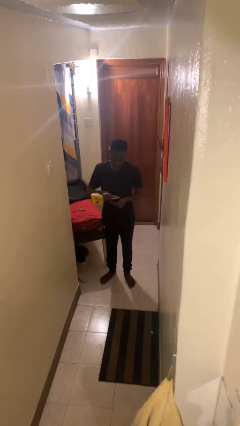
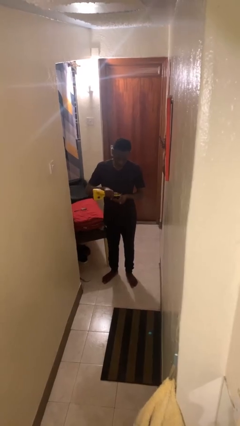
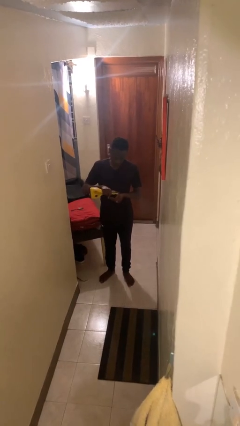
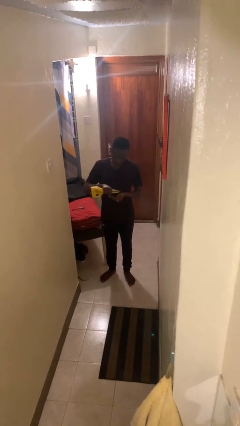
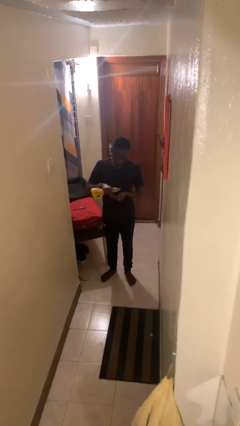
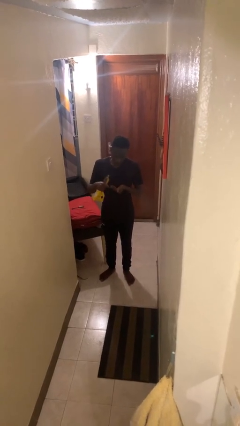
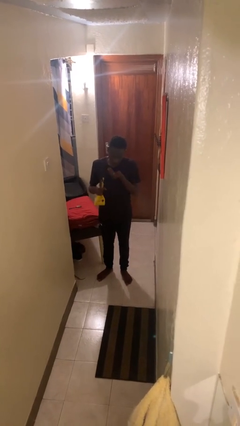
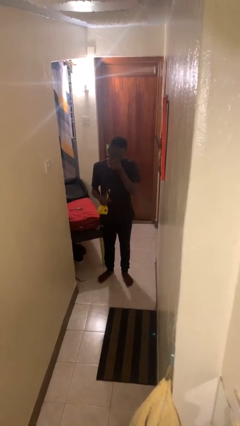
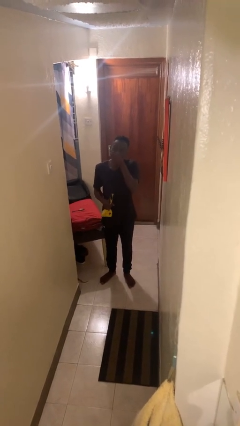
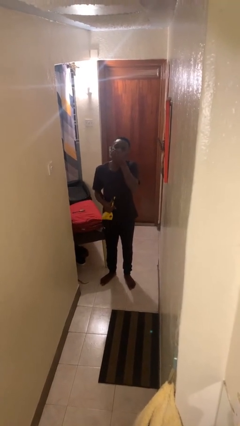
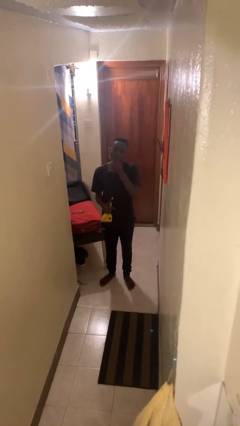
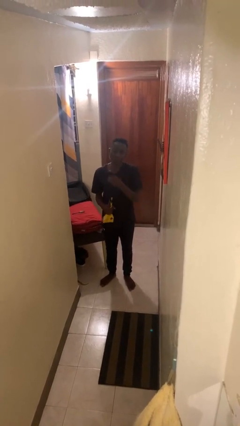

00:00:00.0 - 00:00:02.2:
person eats snack from bag

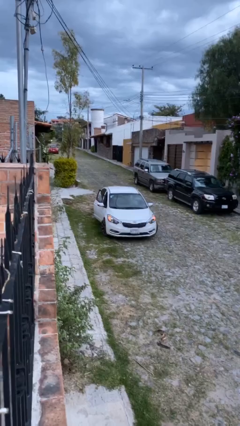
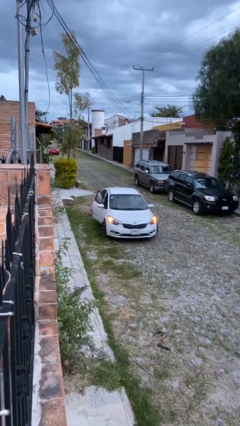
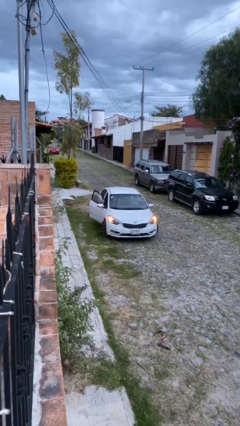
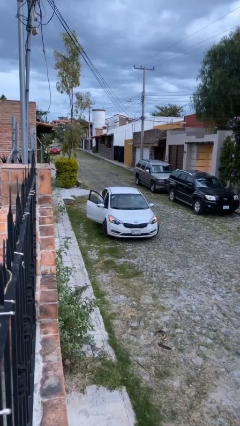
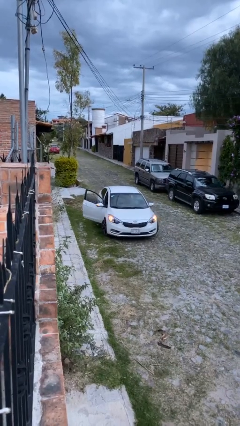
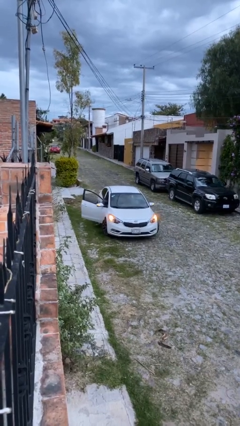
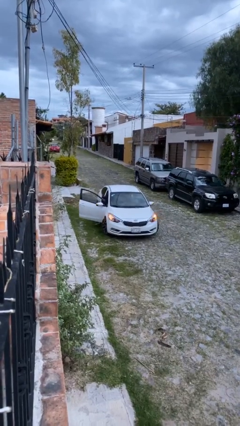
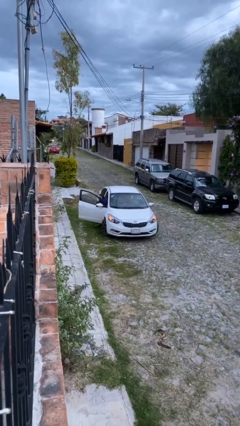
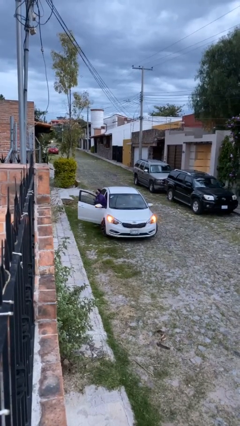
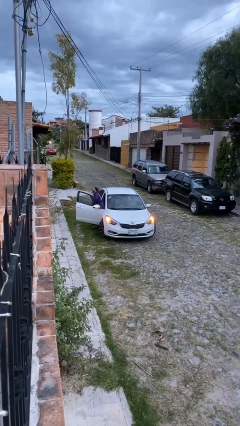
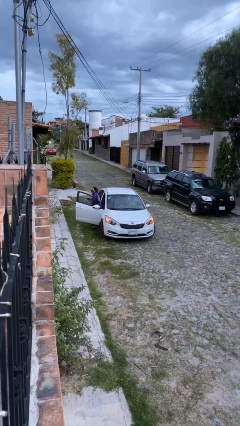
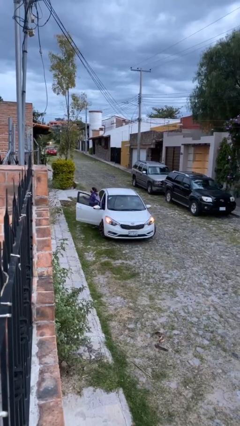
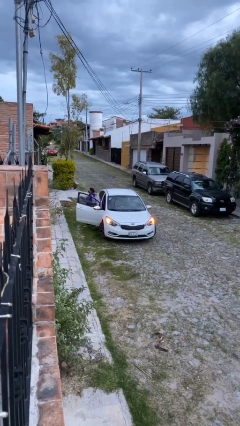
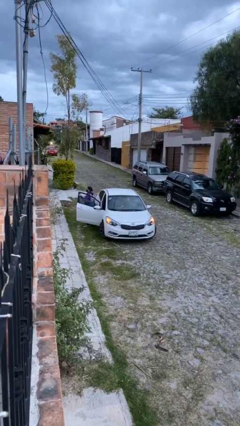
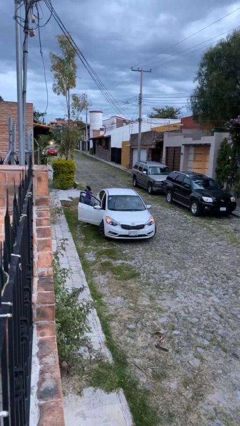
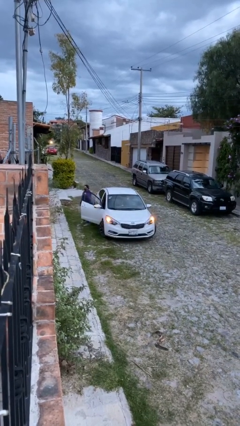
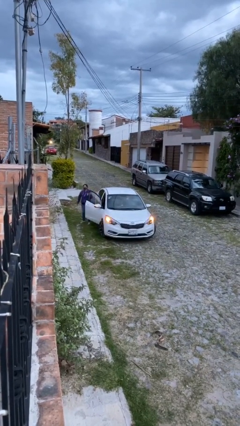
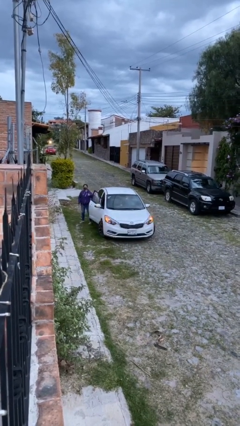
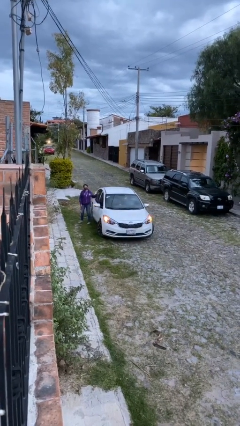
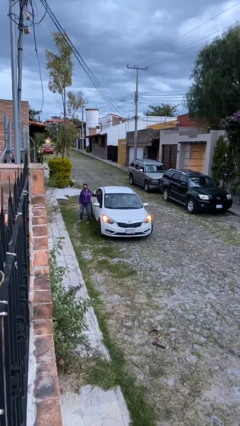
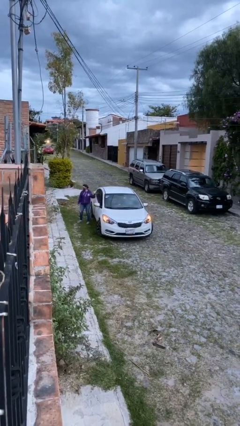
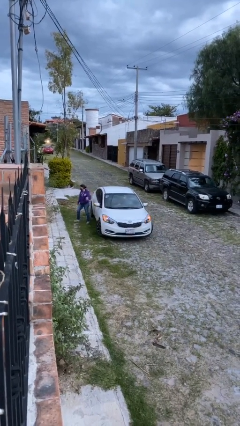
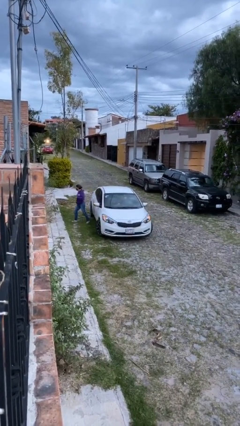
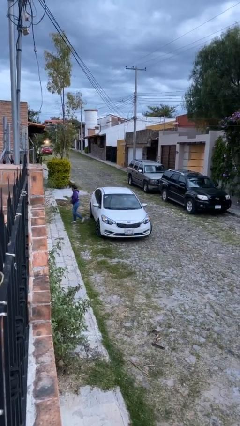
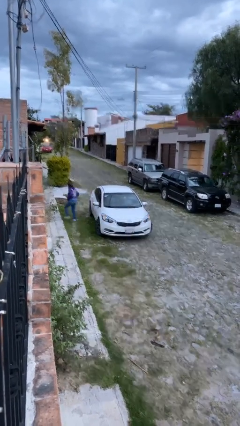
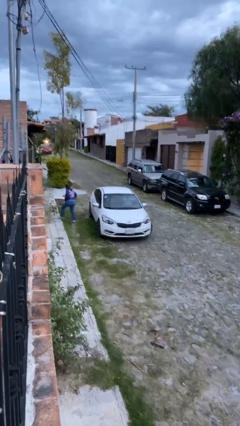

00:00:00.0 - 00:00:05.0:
car drops off person

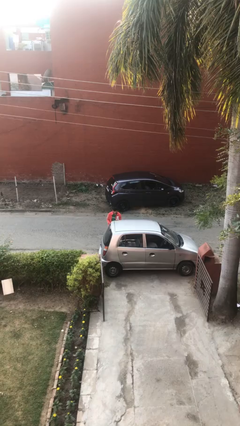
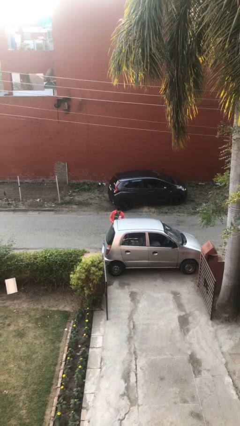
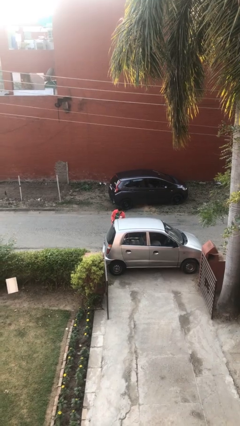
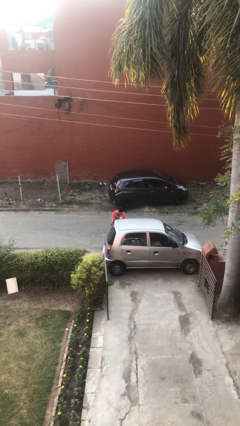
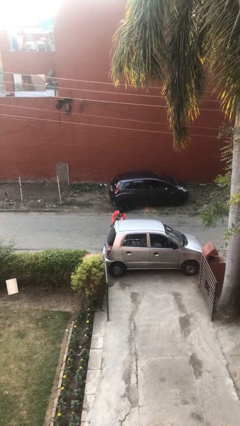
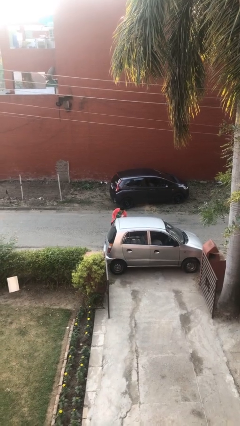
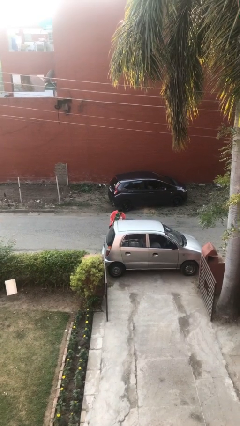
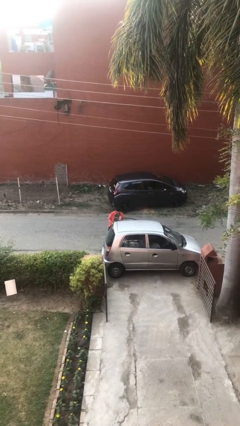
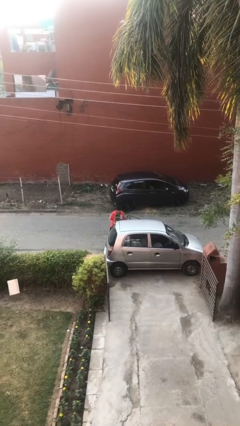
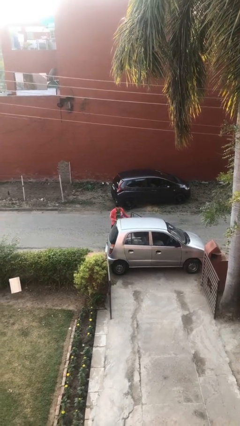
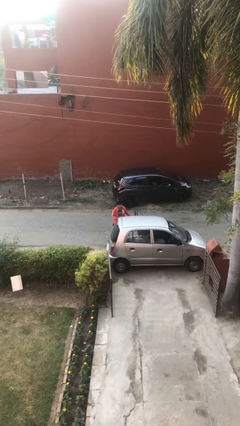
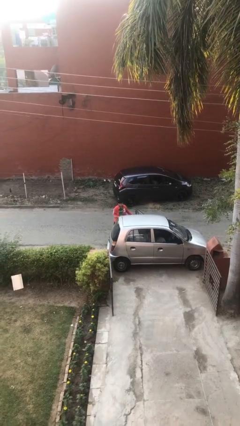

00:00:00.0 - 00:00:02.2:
person opens car door

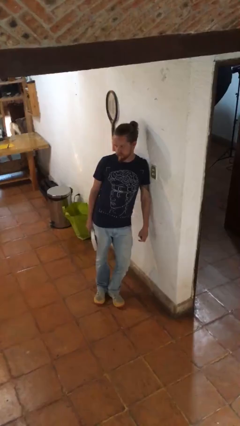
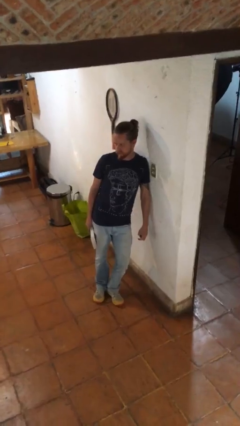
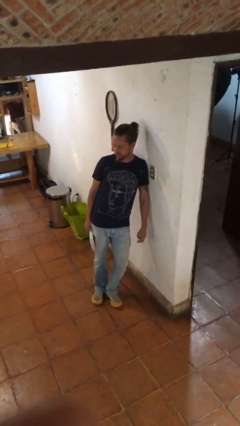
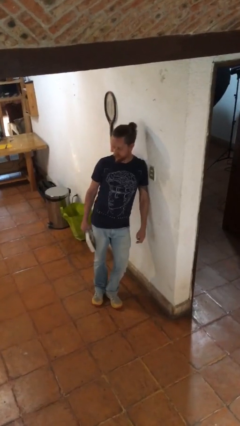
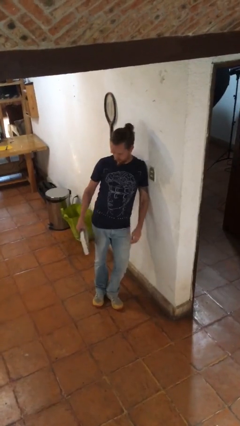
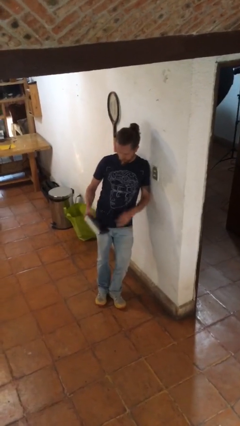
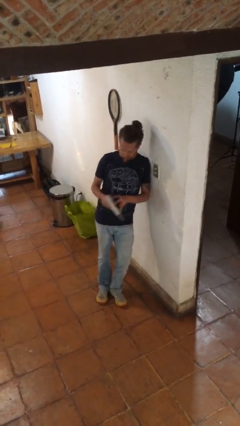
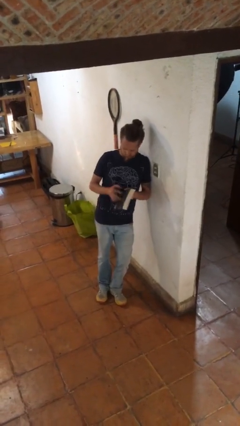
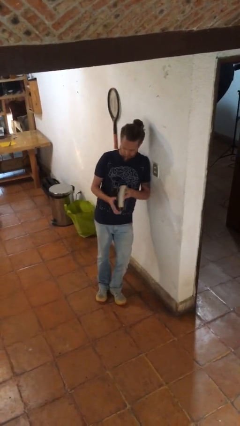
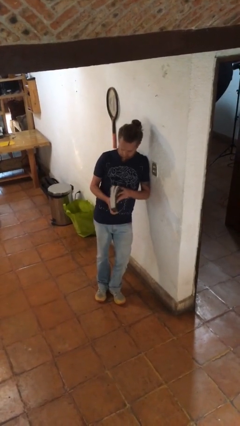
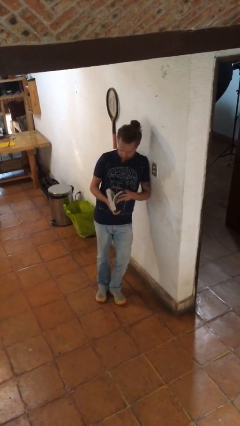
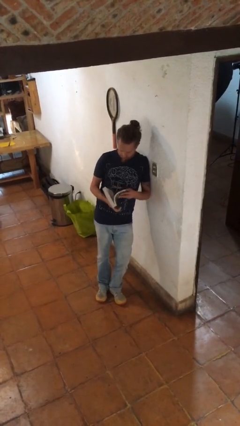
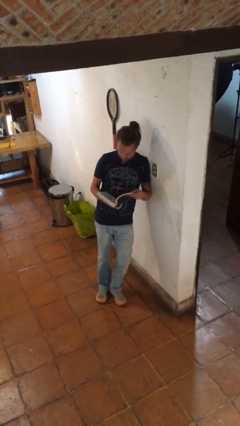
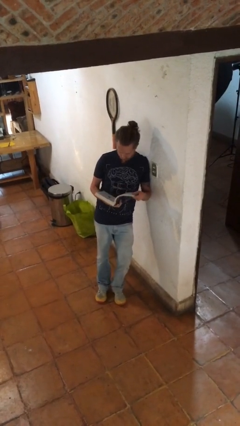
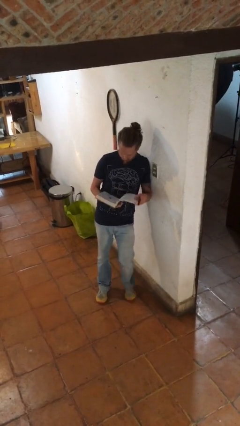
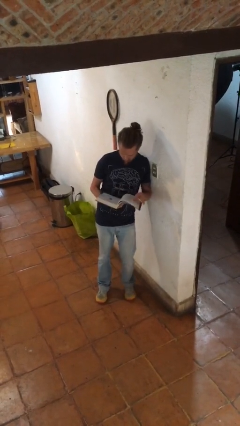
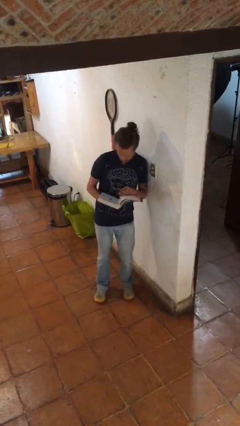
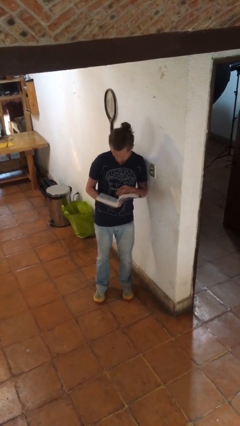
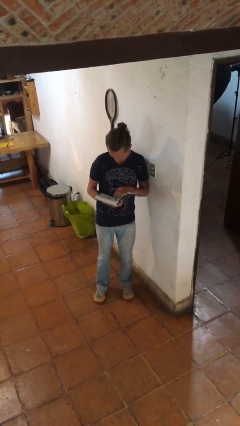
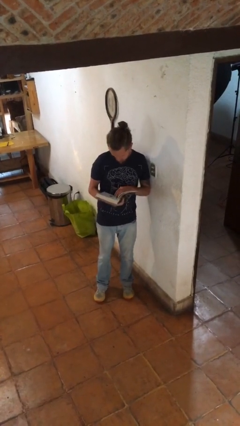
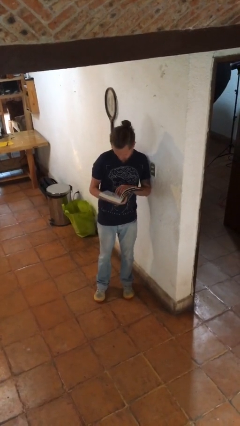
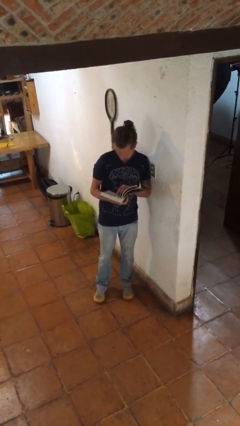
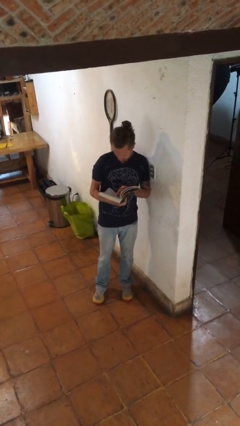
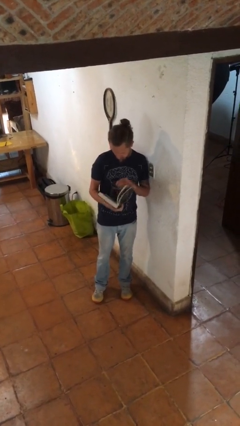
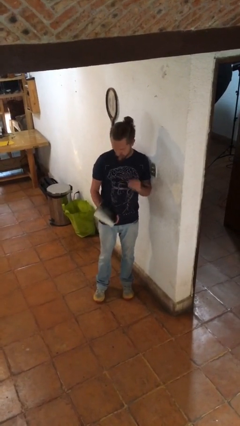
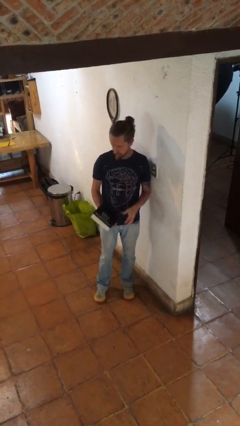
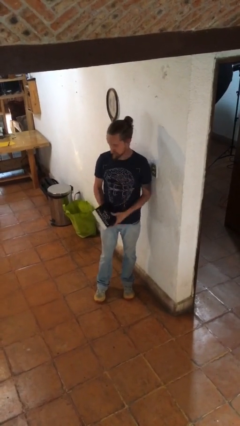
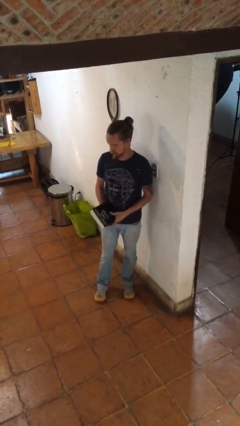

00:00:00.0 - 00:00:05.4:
person reads book

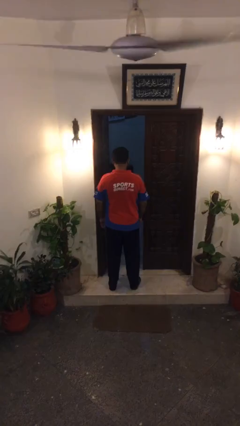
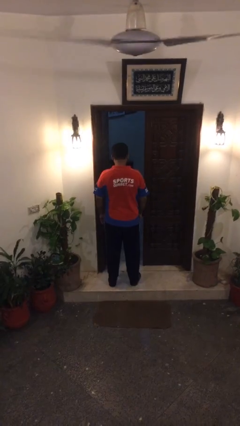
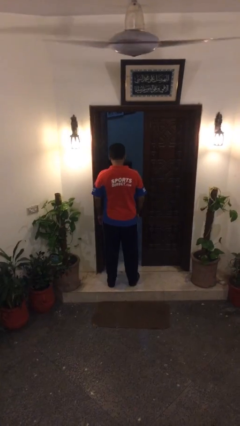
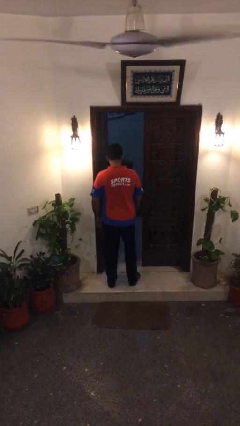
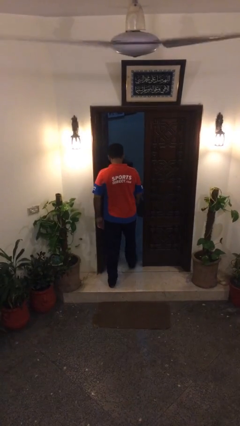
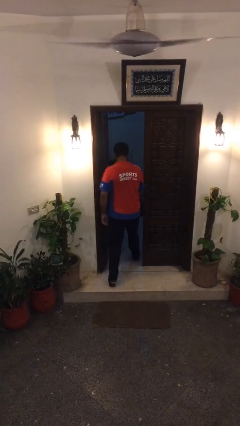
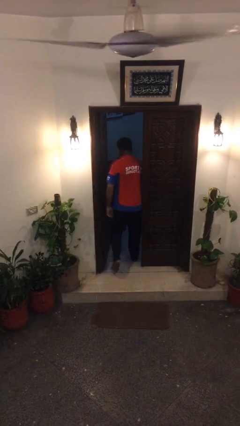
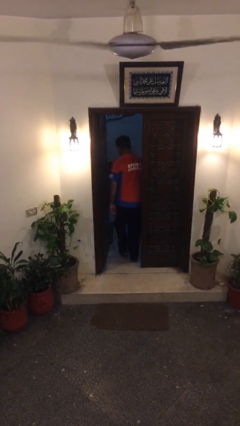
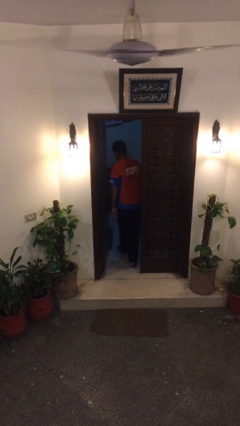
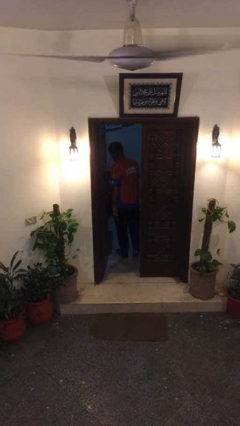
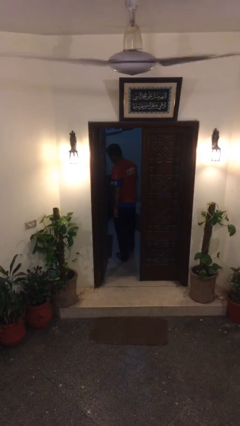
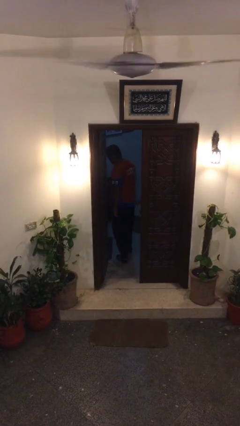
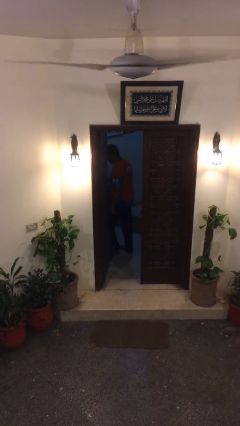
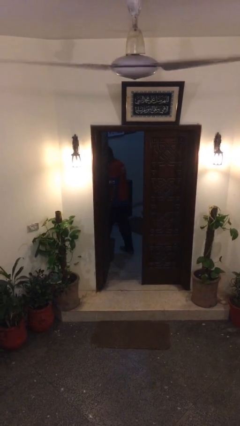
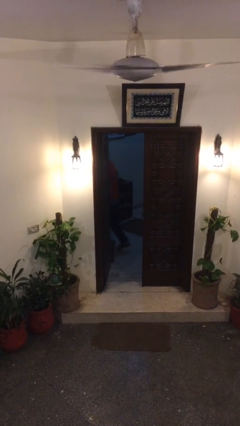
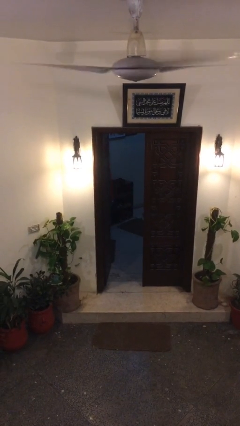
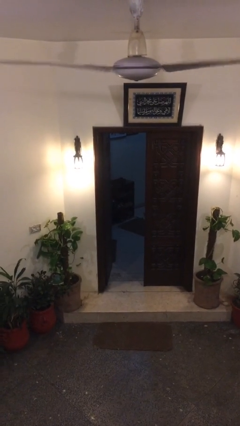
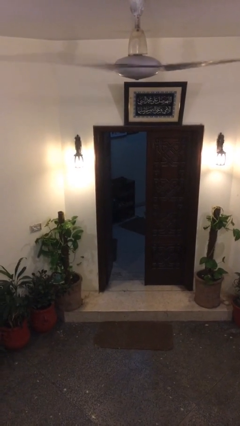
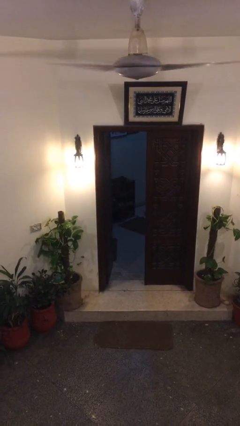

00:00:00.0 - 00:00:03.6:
person exits scene through structure
